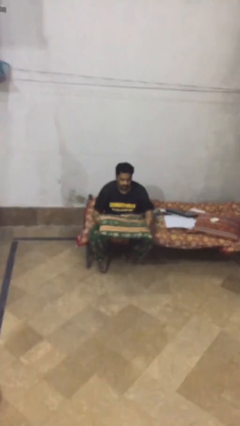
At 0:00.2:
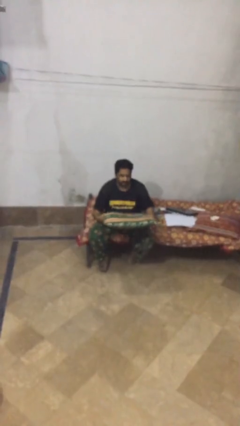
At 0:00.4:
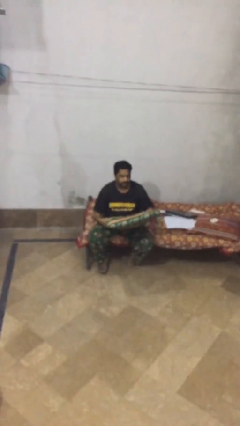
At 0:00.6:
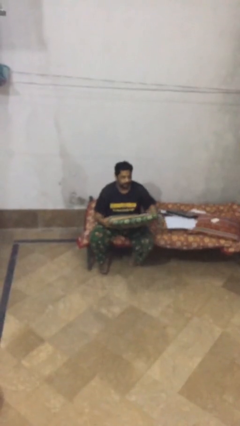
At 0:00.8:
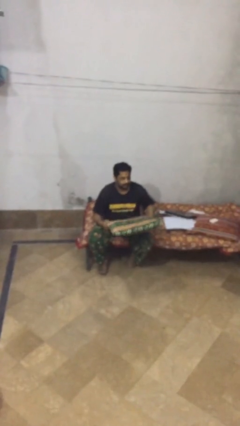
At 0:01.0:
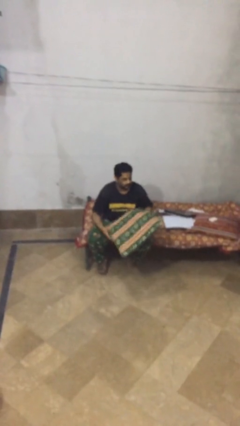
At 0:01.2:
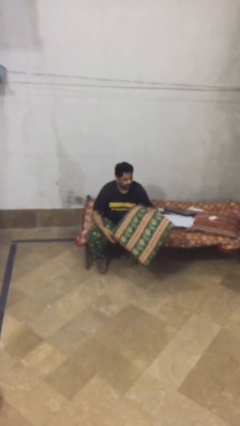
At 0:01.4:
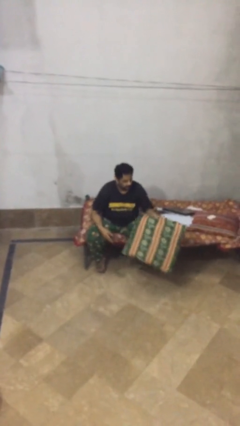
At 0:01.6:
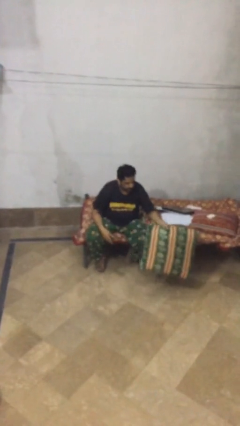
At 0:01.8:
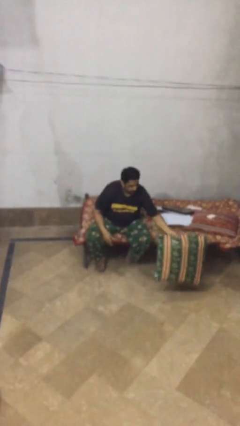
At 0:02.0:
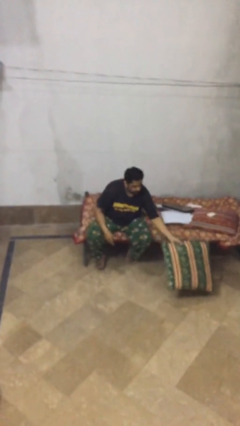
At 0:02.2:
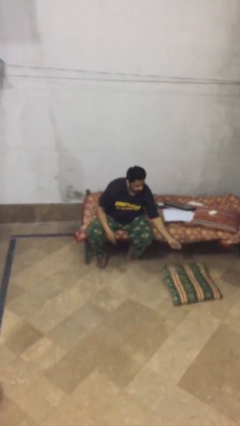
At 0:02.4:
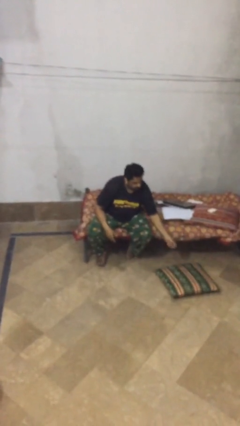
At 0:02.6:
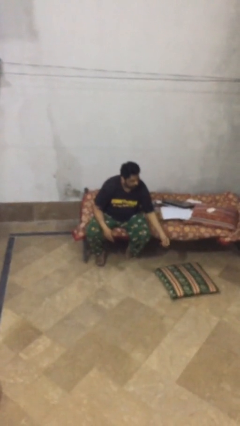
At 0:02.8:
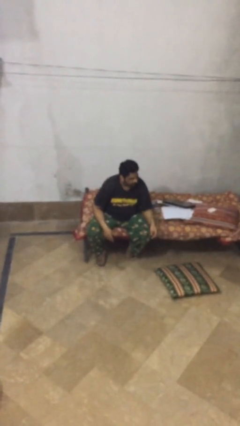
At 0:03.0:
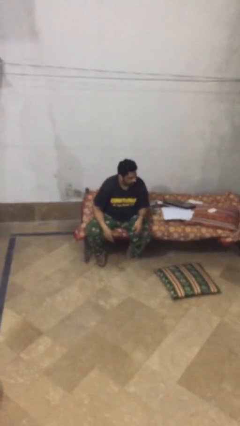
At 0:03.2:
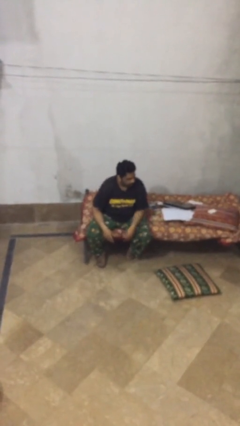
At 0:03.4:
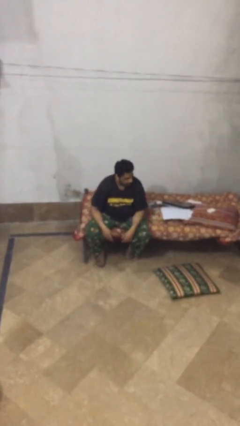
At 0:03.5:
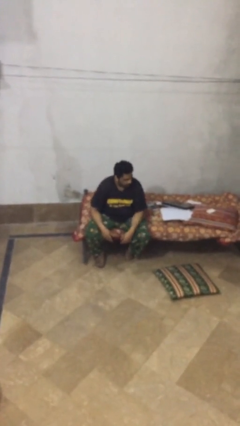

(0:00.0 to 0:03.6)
person puts down object on floor

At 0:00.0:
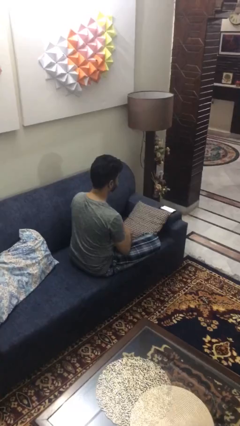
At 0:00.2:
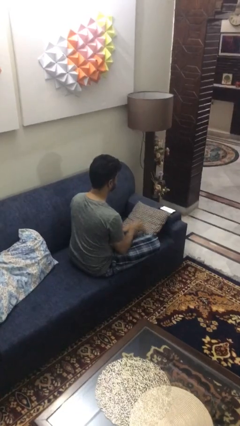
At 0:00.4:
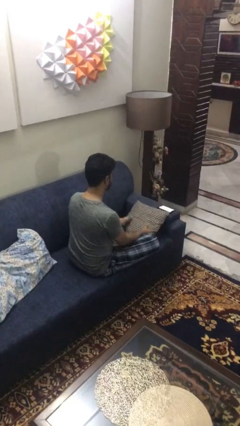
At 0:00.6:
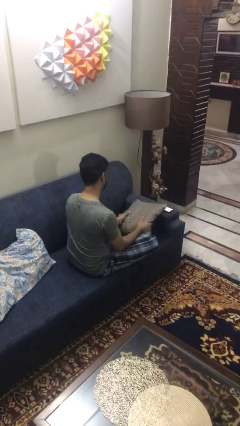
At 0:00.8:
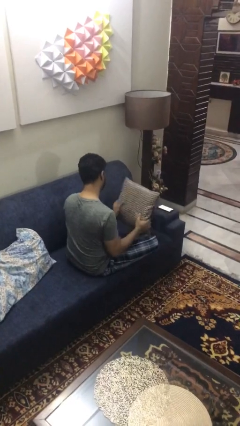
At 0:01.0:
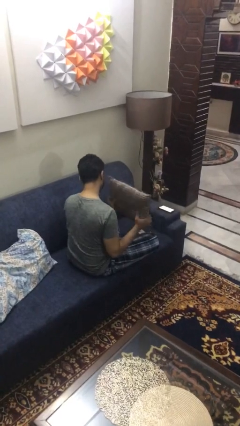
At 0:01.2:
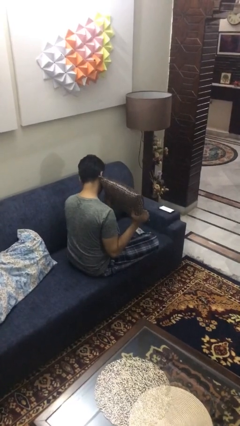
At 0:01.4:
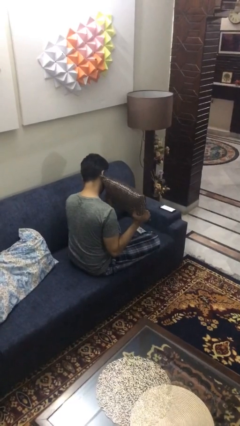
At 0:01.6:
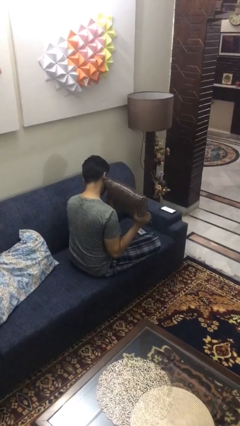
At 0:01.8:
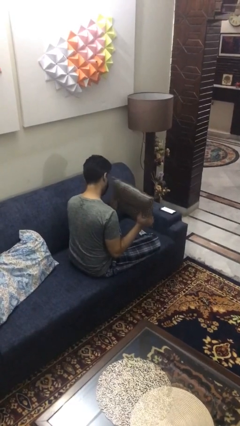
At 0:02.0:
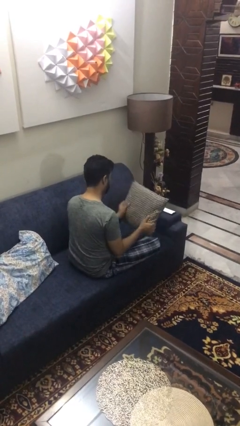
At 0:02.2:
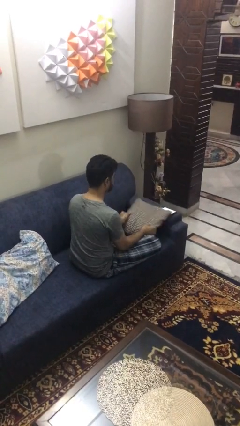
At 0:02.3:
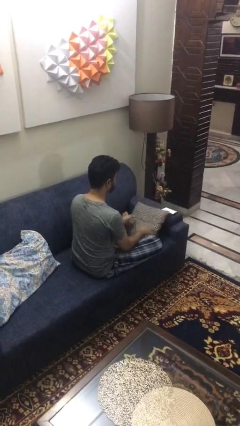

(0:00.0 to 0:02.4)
person searches in couch

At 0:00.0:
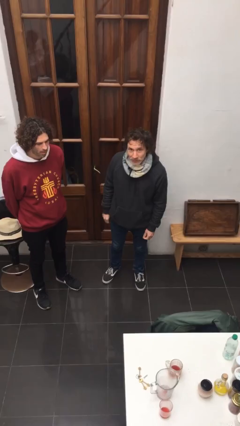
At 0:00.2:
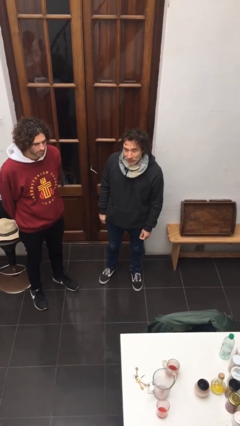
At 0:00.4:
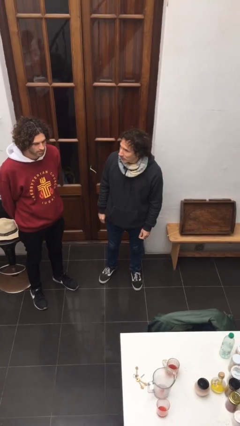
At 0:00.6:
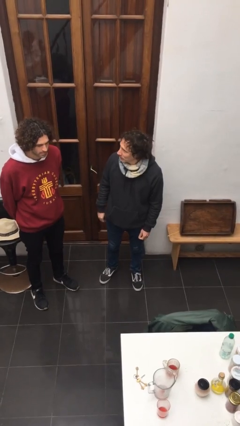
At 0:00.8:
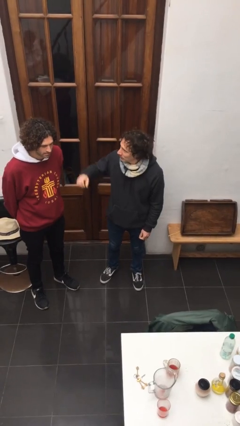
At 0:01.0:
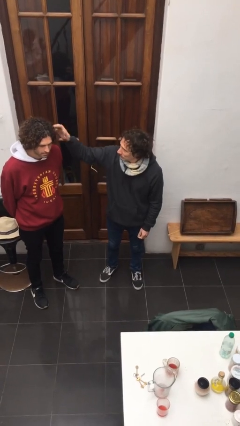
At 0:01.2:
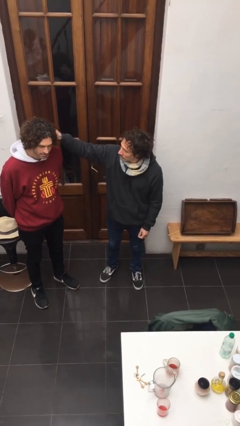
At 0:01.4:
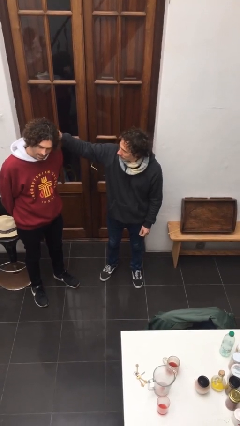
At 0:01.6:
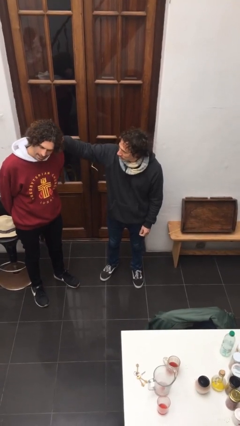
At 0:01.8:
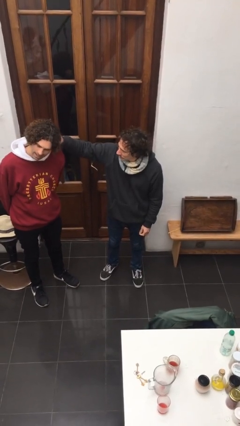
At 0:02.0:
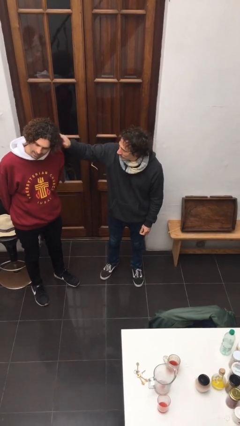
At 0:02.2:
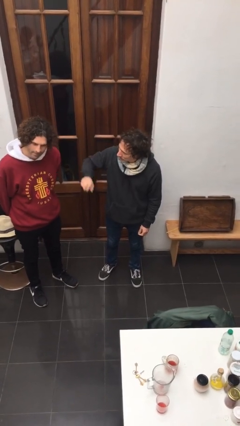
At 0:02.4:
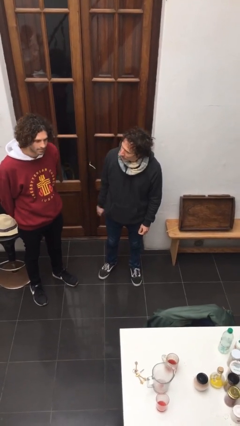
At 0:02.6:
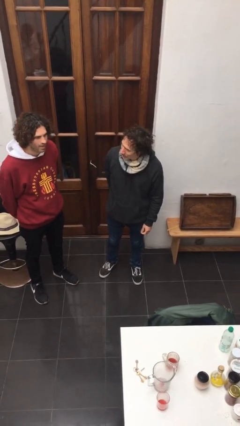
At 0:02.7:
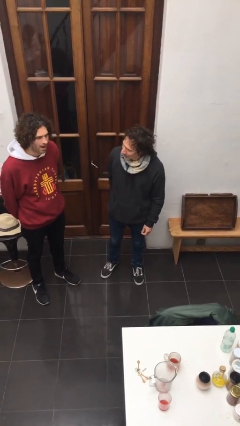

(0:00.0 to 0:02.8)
person grabs person by hair

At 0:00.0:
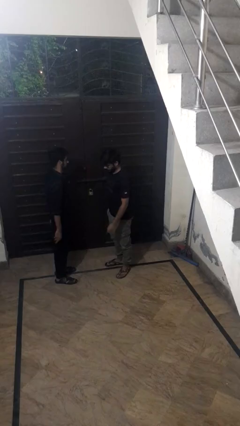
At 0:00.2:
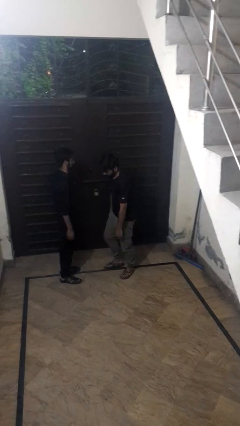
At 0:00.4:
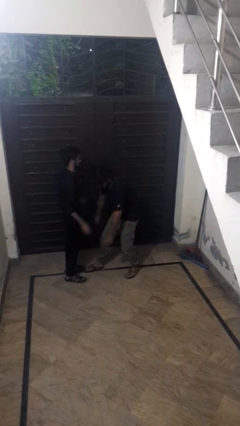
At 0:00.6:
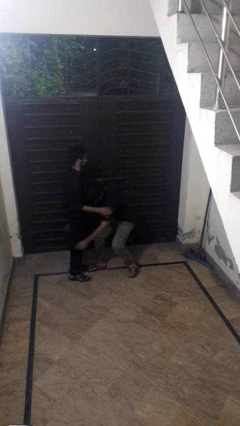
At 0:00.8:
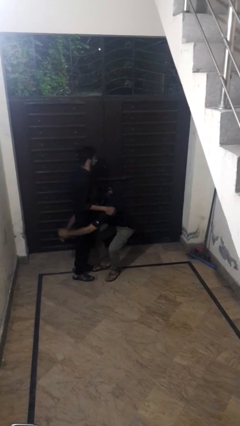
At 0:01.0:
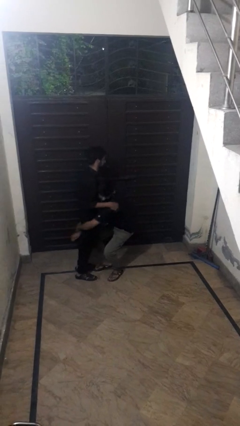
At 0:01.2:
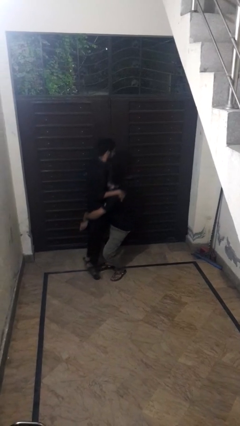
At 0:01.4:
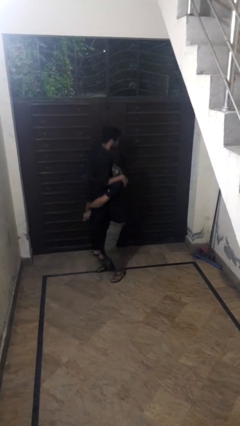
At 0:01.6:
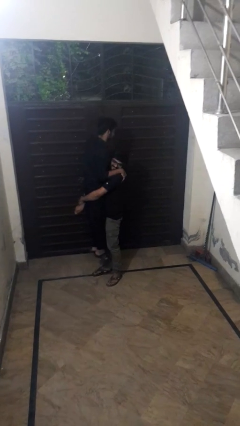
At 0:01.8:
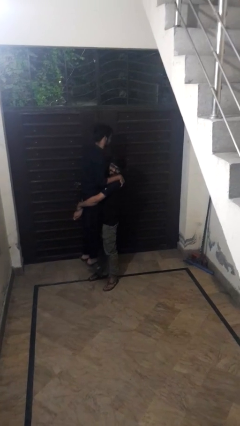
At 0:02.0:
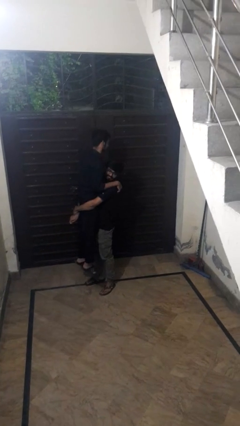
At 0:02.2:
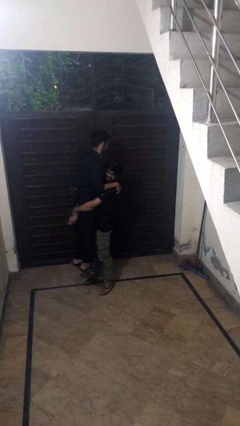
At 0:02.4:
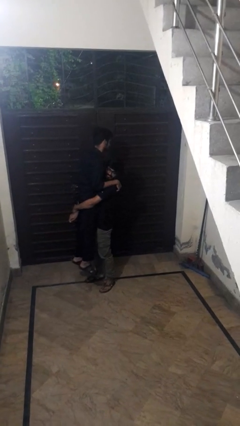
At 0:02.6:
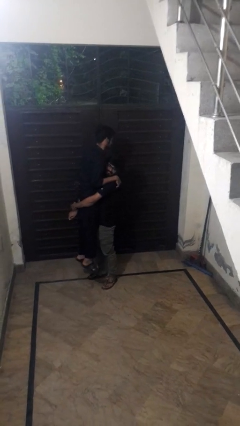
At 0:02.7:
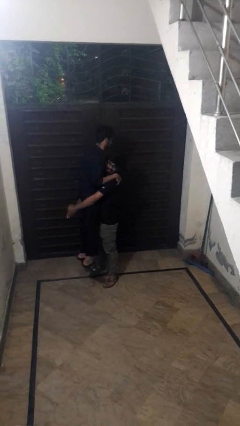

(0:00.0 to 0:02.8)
person picks up person

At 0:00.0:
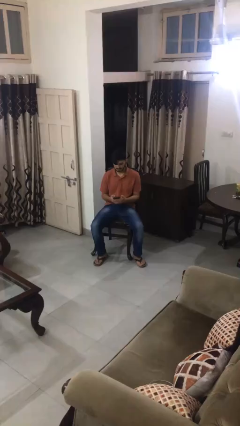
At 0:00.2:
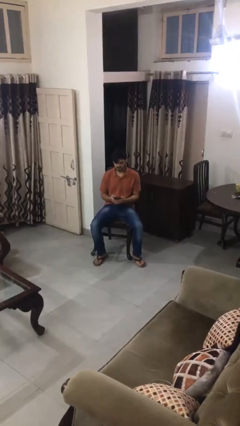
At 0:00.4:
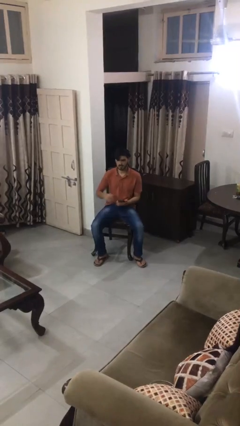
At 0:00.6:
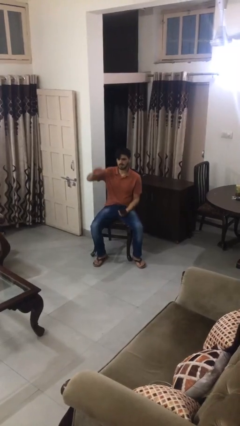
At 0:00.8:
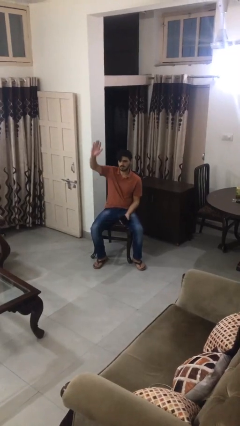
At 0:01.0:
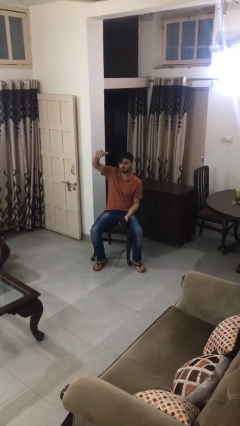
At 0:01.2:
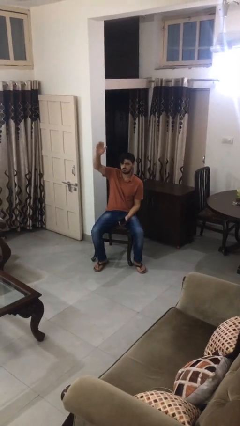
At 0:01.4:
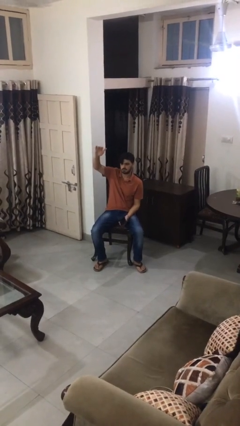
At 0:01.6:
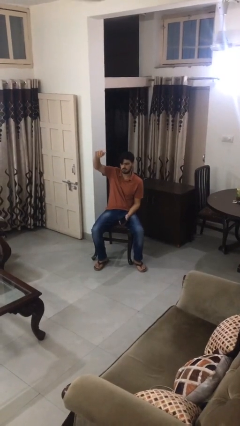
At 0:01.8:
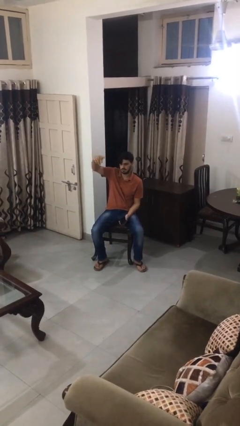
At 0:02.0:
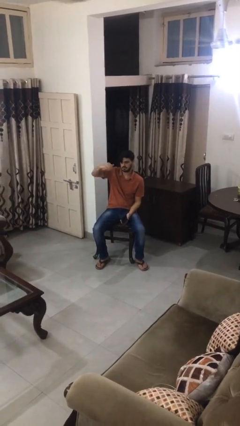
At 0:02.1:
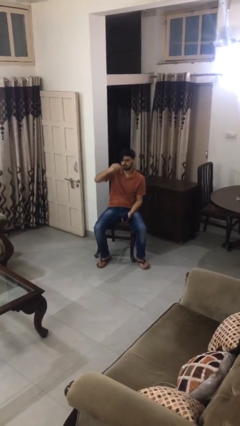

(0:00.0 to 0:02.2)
person gestures come here

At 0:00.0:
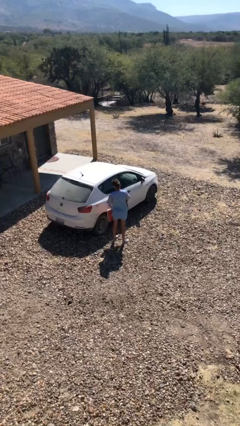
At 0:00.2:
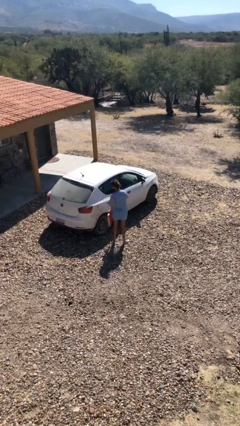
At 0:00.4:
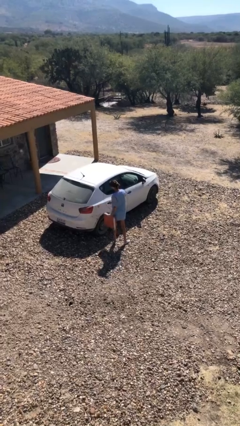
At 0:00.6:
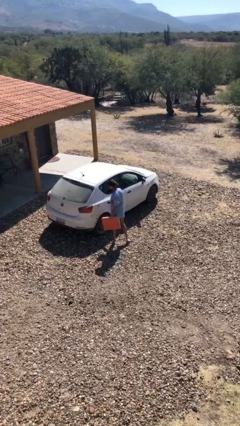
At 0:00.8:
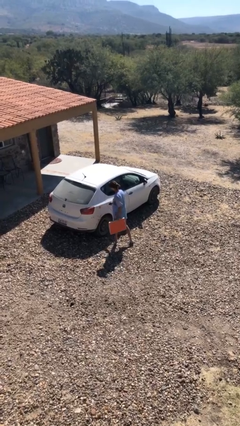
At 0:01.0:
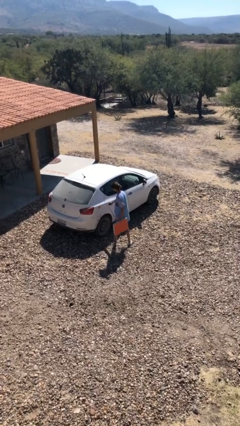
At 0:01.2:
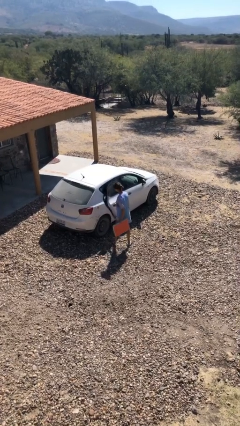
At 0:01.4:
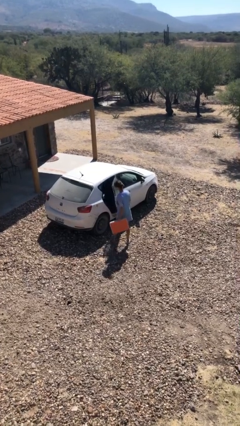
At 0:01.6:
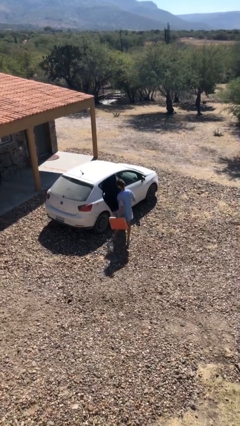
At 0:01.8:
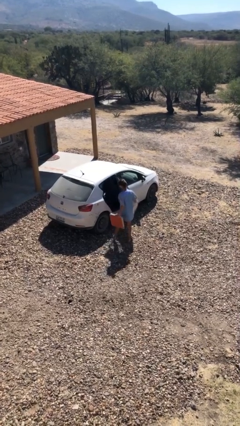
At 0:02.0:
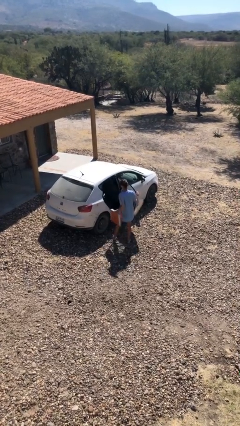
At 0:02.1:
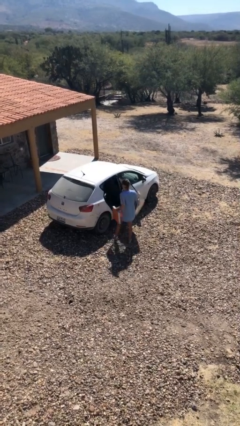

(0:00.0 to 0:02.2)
person opens car door

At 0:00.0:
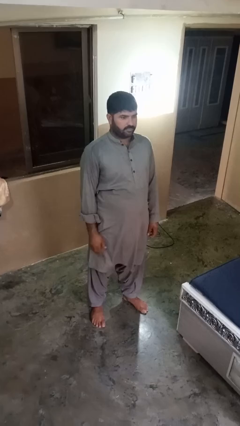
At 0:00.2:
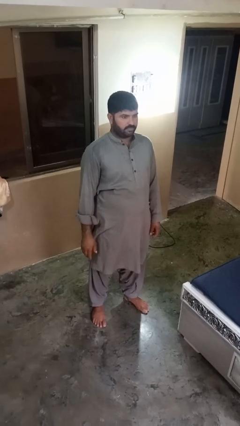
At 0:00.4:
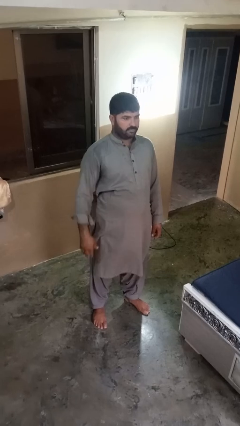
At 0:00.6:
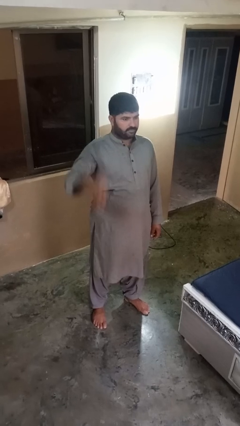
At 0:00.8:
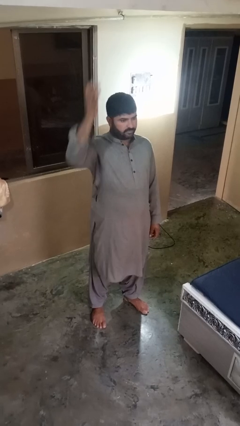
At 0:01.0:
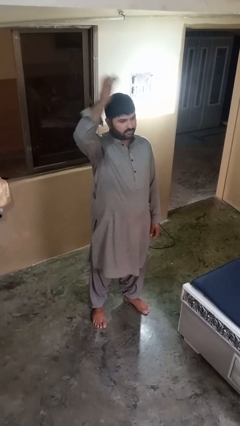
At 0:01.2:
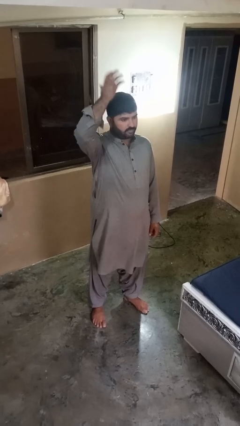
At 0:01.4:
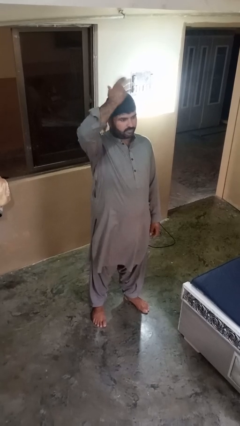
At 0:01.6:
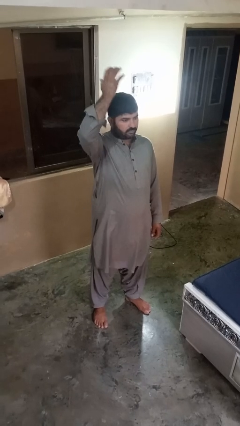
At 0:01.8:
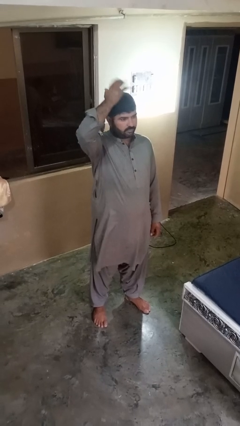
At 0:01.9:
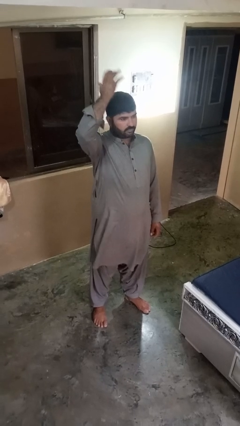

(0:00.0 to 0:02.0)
person pats head
